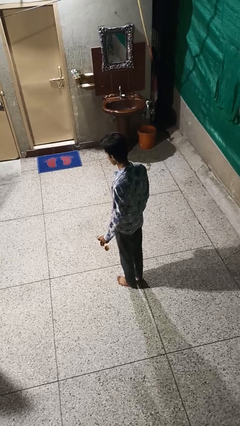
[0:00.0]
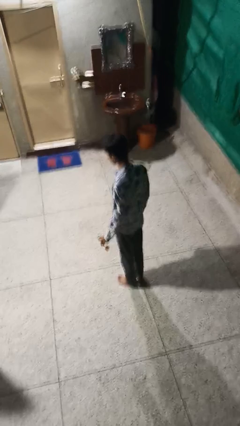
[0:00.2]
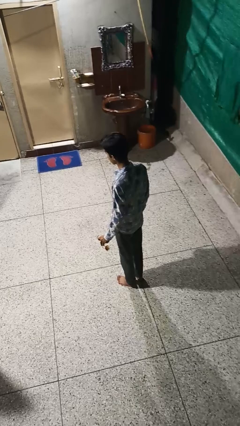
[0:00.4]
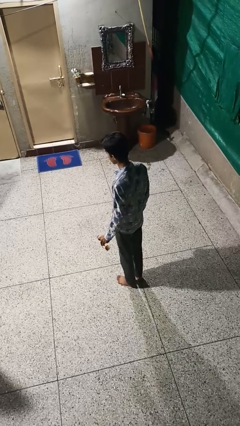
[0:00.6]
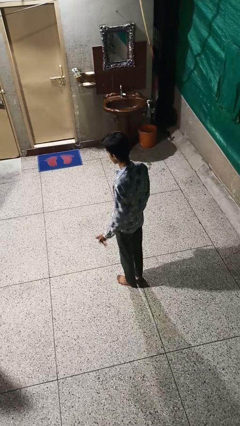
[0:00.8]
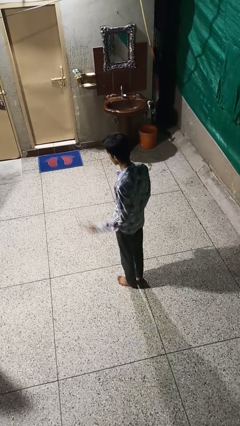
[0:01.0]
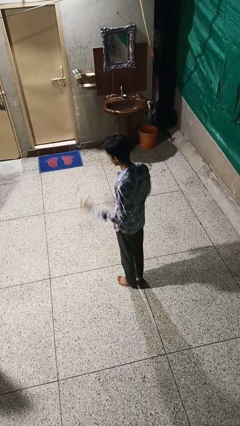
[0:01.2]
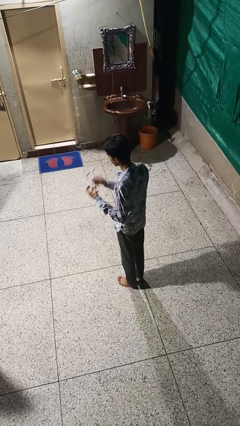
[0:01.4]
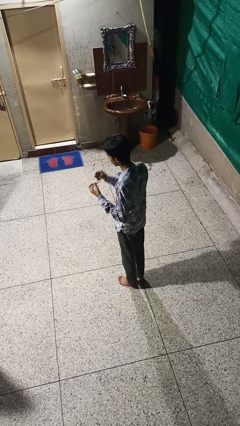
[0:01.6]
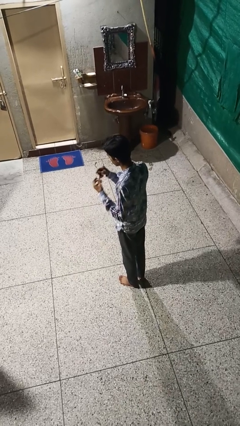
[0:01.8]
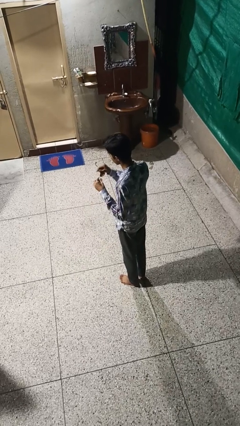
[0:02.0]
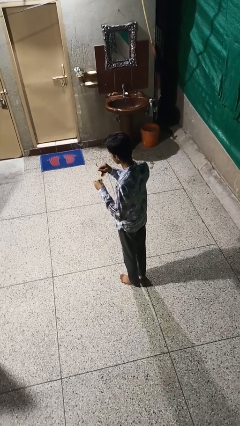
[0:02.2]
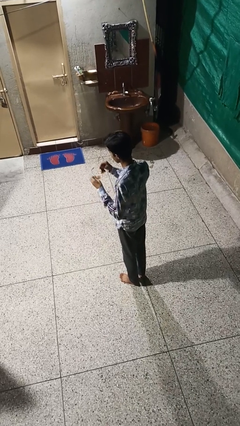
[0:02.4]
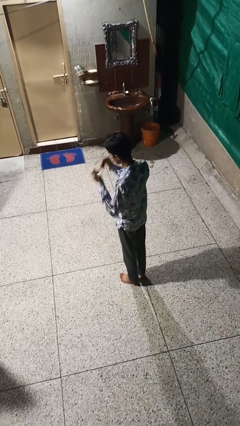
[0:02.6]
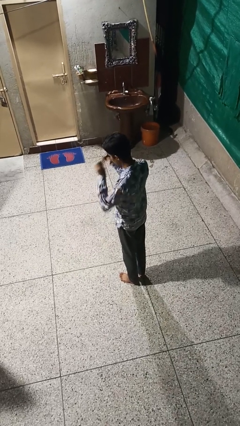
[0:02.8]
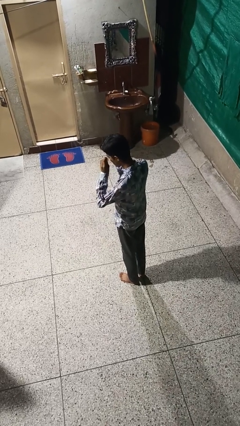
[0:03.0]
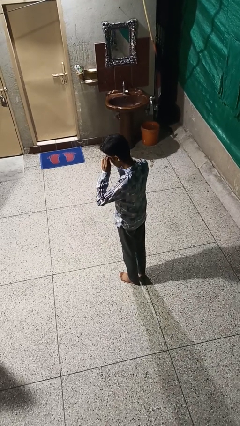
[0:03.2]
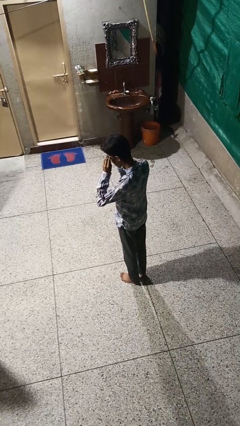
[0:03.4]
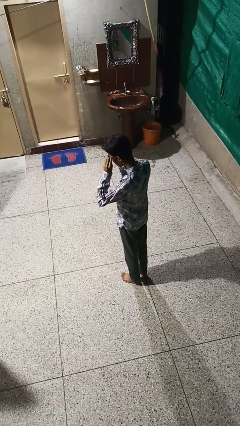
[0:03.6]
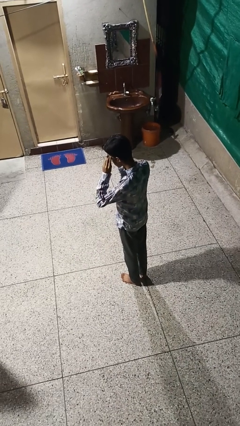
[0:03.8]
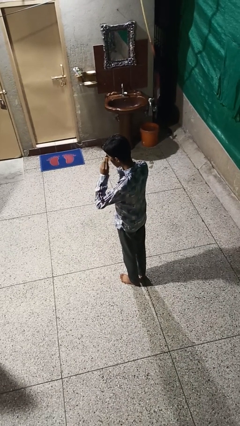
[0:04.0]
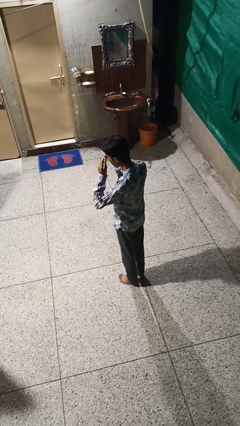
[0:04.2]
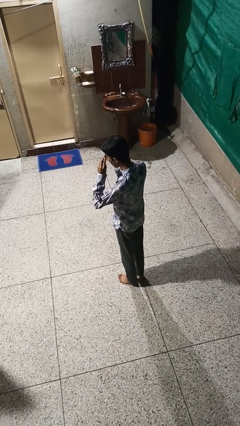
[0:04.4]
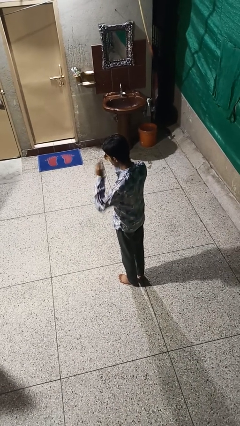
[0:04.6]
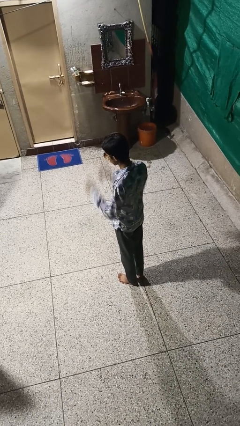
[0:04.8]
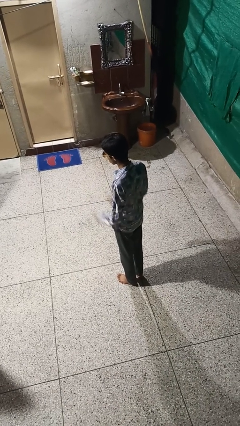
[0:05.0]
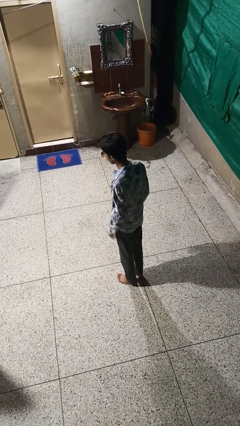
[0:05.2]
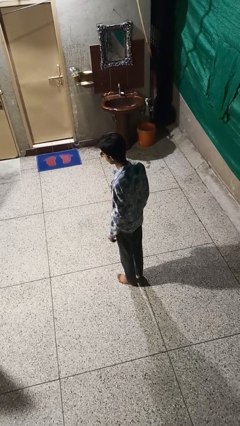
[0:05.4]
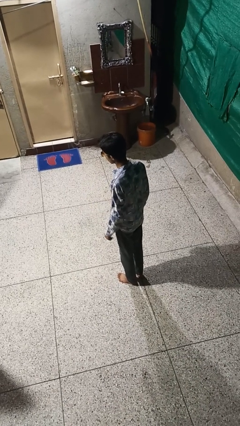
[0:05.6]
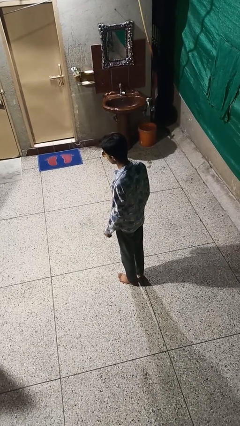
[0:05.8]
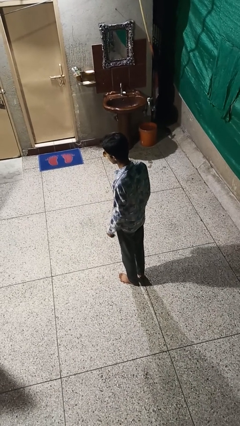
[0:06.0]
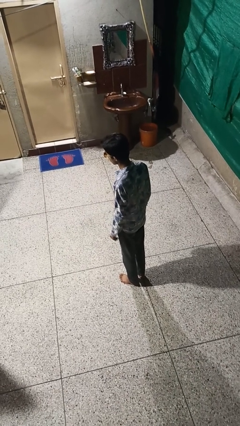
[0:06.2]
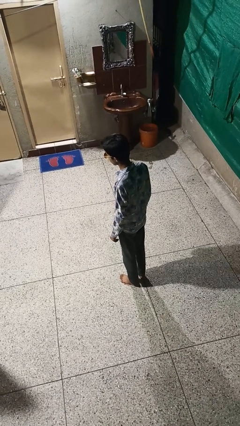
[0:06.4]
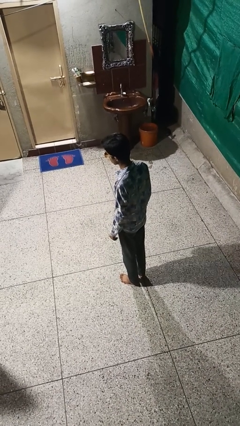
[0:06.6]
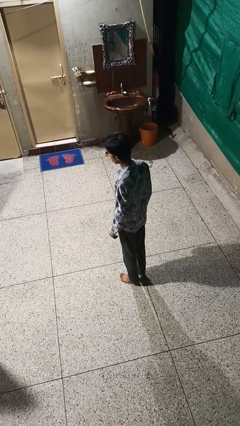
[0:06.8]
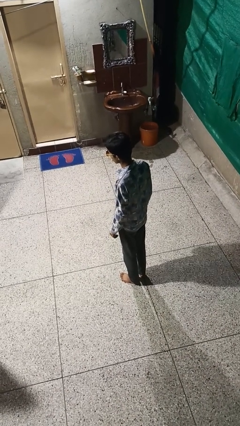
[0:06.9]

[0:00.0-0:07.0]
person puts on sunglasses

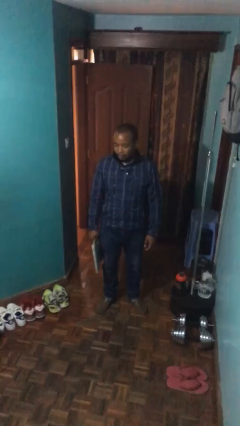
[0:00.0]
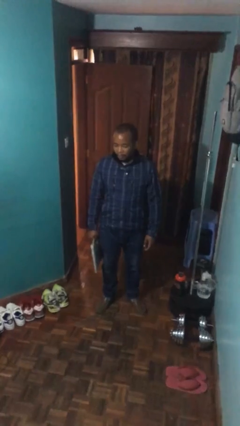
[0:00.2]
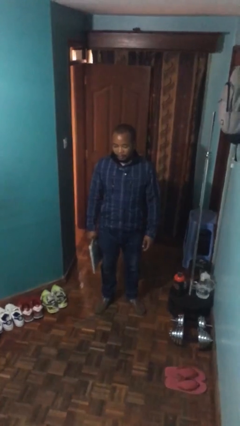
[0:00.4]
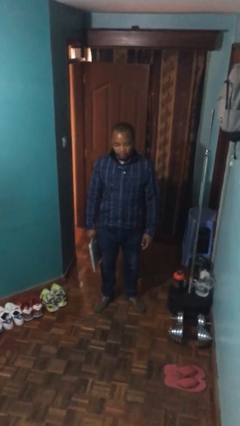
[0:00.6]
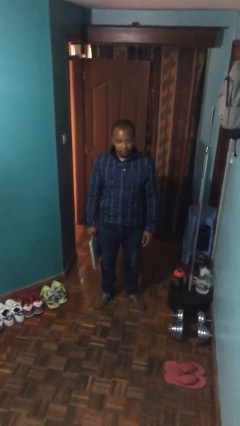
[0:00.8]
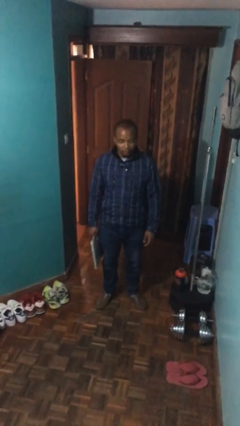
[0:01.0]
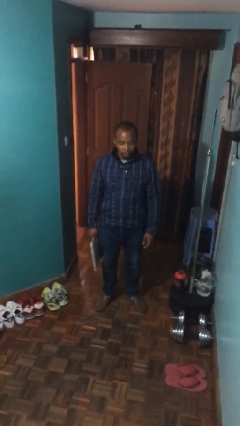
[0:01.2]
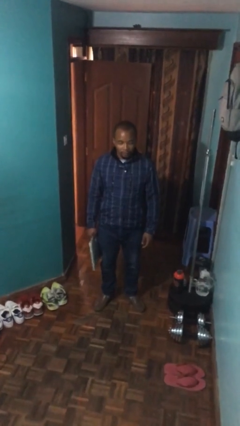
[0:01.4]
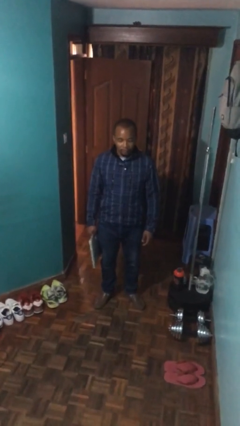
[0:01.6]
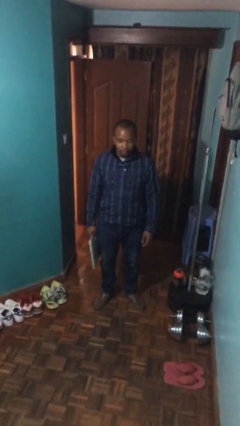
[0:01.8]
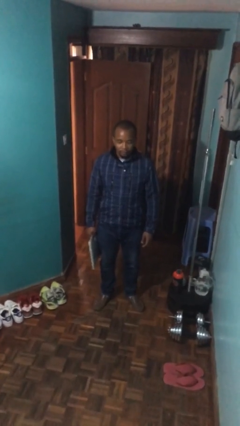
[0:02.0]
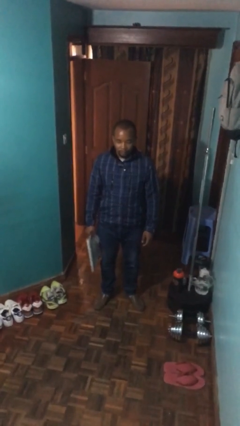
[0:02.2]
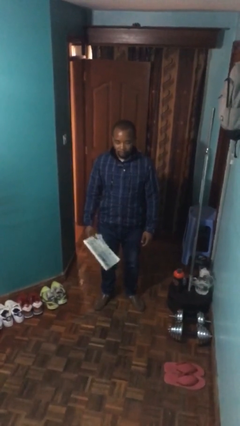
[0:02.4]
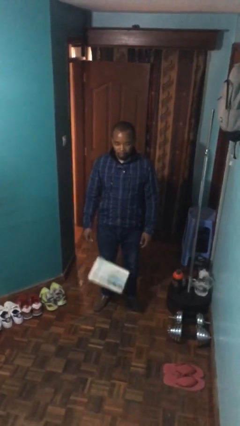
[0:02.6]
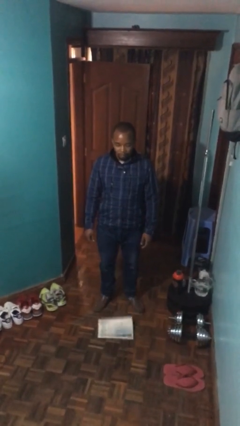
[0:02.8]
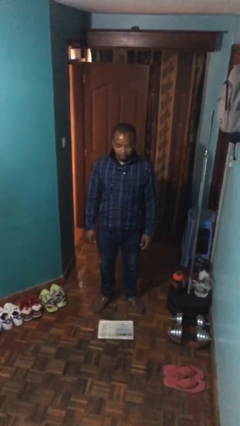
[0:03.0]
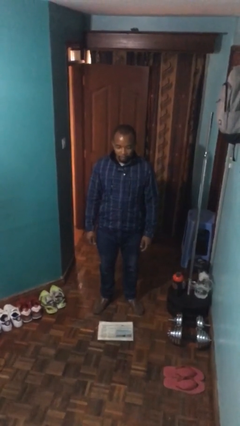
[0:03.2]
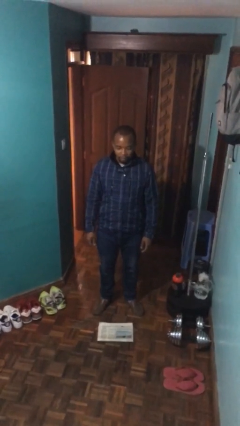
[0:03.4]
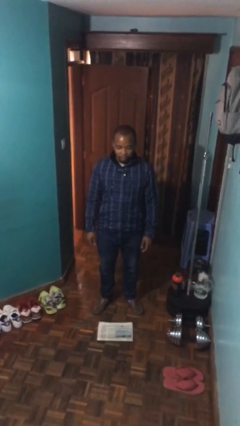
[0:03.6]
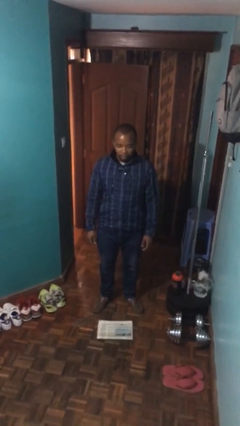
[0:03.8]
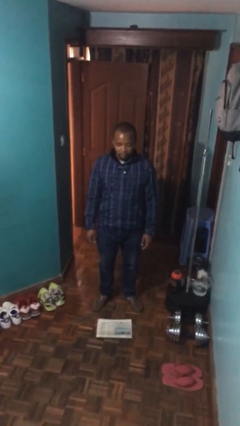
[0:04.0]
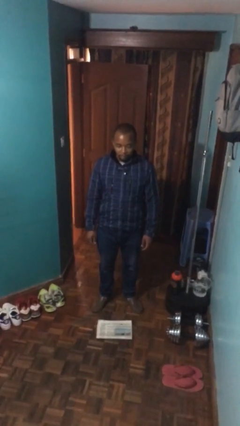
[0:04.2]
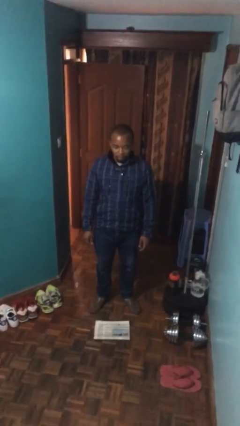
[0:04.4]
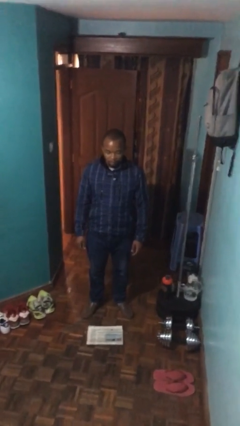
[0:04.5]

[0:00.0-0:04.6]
person drops object

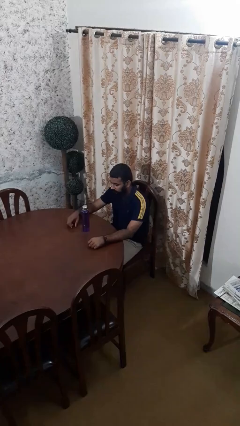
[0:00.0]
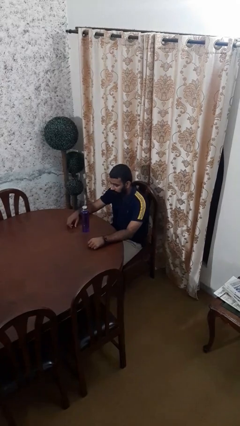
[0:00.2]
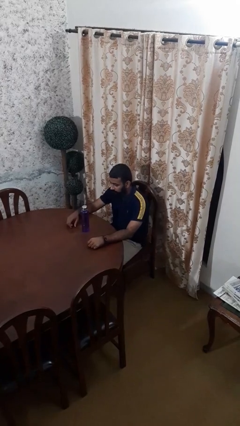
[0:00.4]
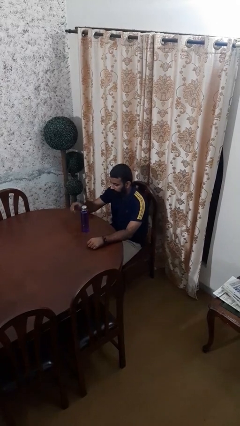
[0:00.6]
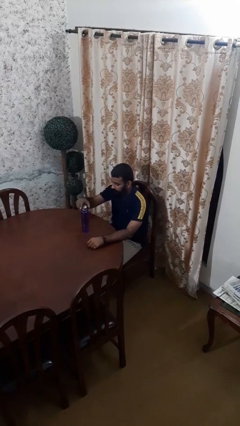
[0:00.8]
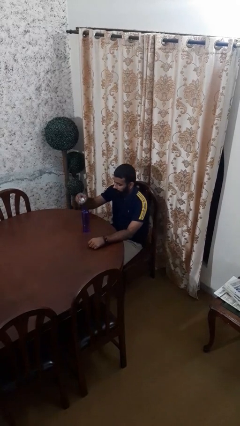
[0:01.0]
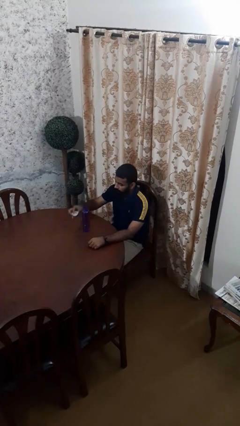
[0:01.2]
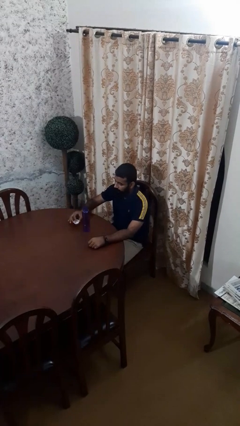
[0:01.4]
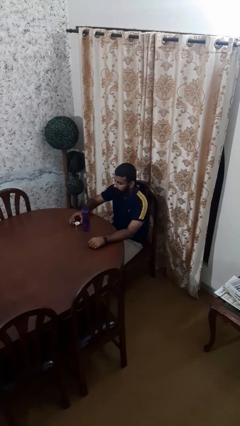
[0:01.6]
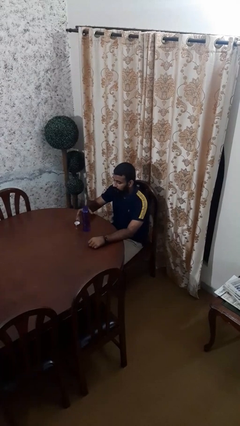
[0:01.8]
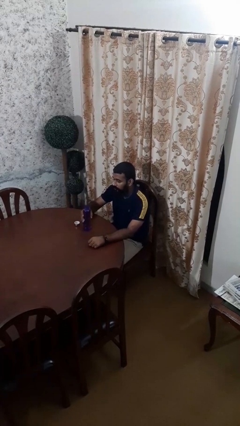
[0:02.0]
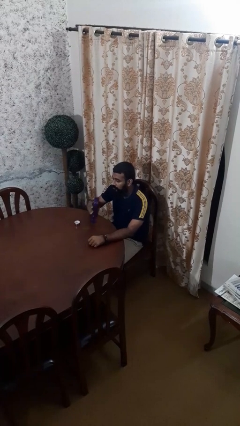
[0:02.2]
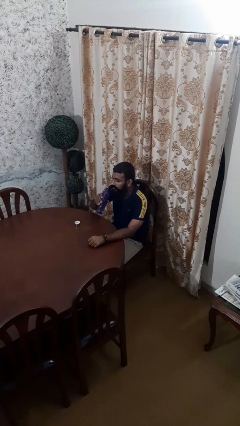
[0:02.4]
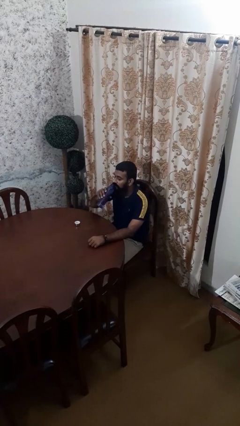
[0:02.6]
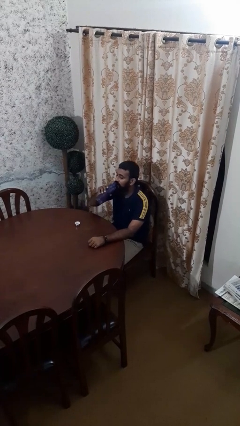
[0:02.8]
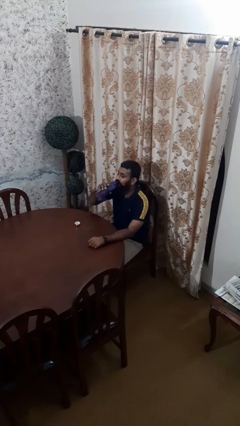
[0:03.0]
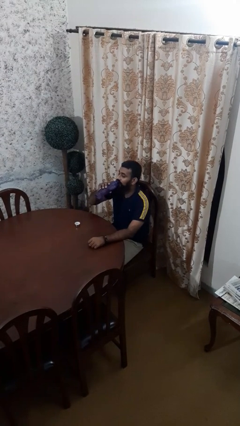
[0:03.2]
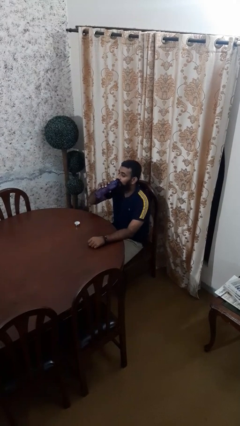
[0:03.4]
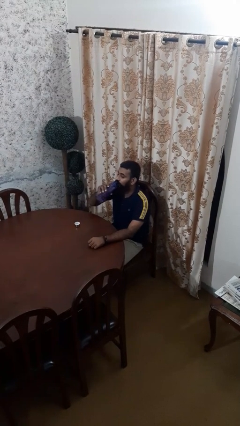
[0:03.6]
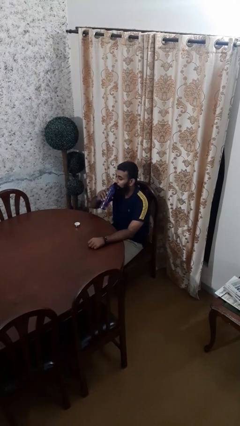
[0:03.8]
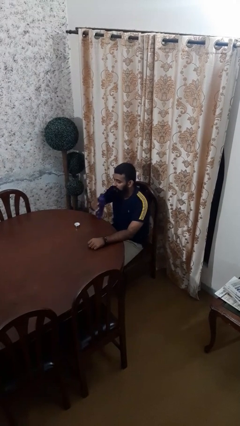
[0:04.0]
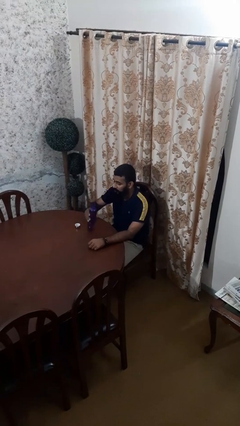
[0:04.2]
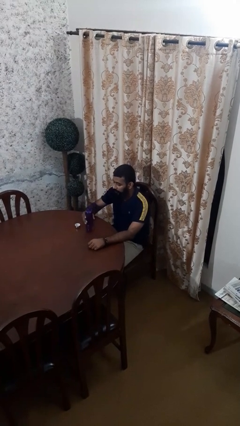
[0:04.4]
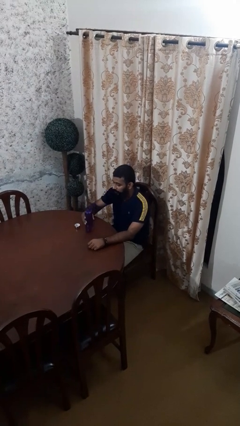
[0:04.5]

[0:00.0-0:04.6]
person drinks from bottle

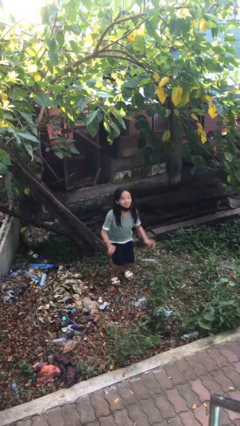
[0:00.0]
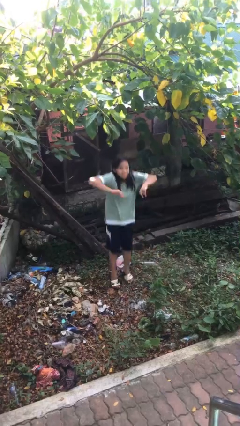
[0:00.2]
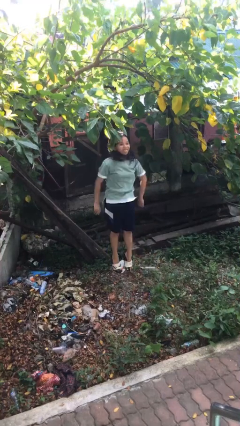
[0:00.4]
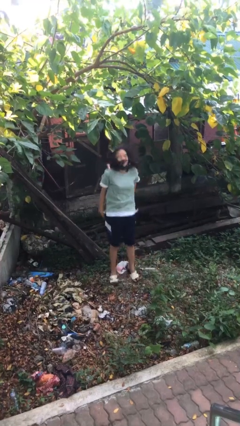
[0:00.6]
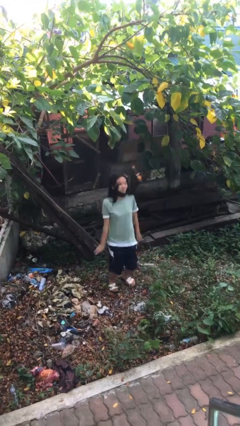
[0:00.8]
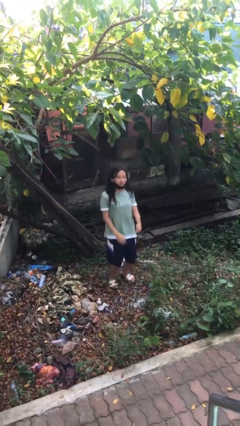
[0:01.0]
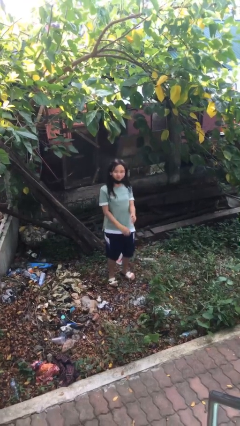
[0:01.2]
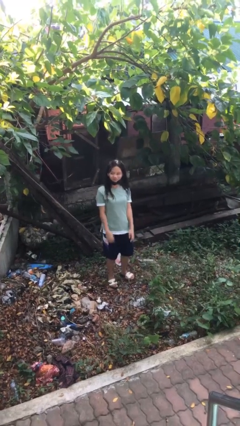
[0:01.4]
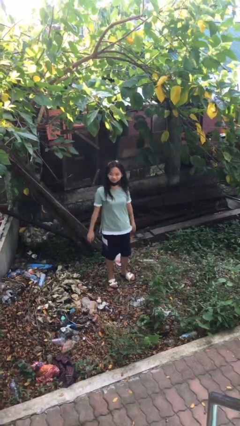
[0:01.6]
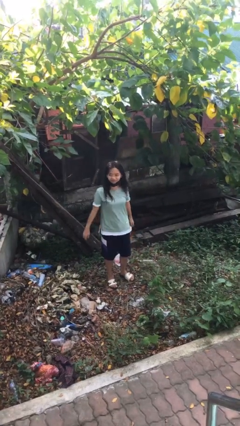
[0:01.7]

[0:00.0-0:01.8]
person jumps
